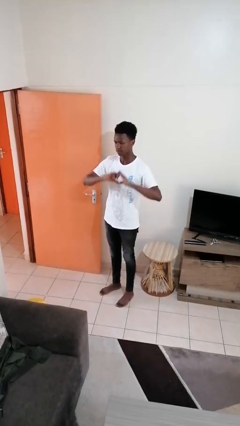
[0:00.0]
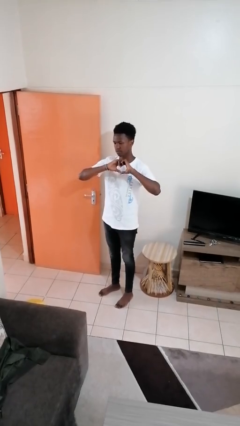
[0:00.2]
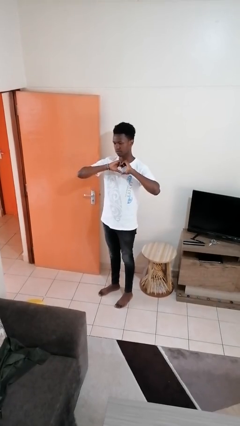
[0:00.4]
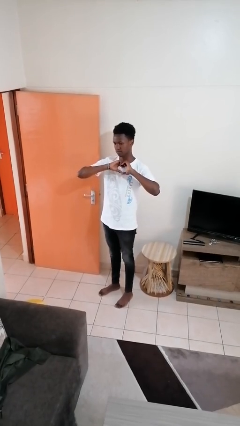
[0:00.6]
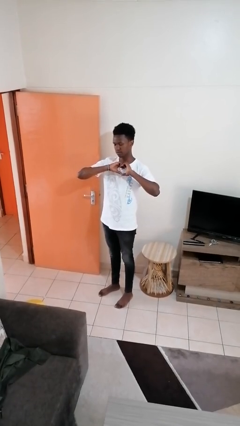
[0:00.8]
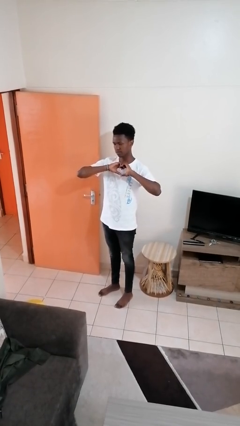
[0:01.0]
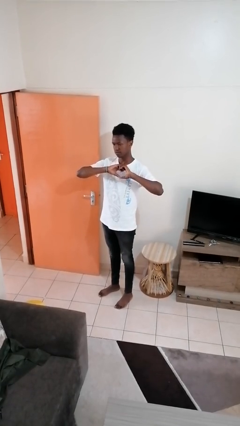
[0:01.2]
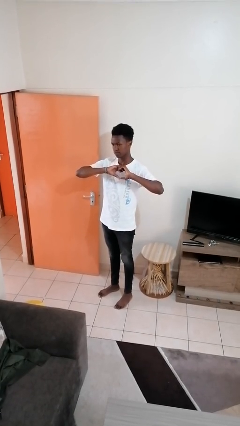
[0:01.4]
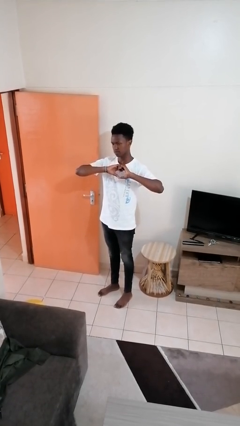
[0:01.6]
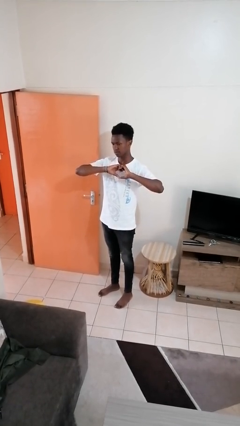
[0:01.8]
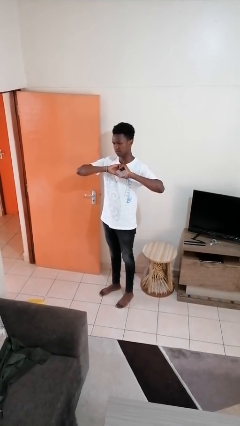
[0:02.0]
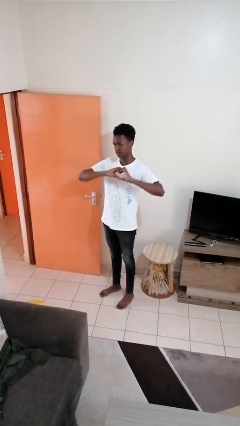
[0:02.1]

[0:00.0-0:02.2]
person gestures heart

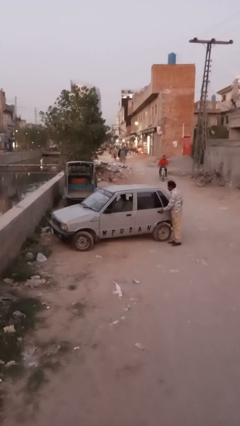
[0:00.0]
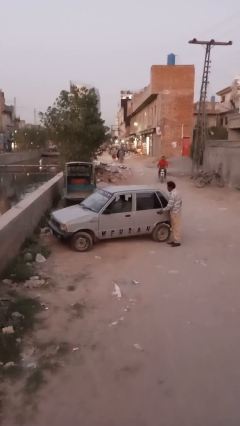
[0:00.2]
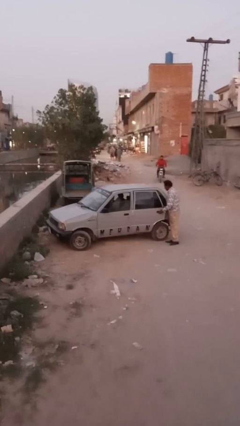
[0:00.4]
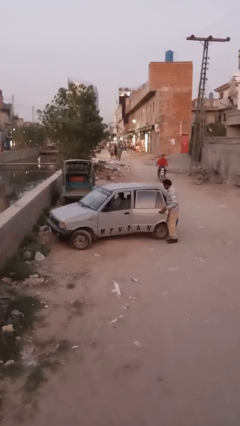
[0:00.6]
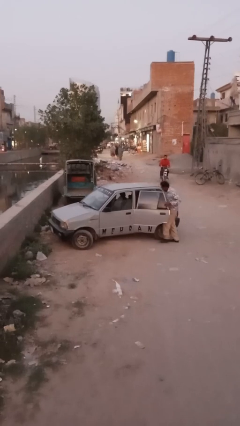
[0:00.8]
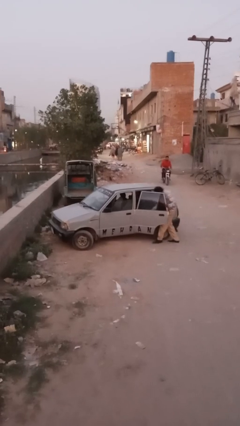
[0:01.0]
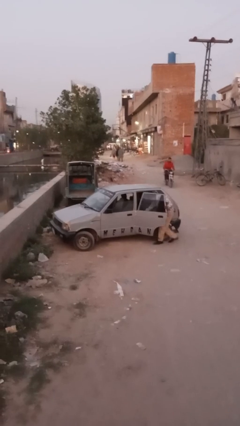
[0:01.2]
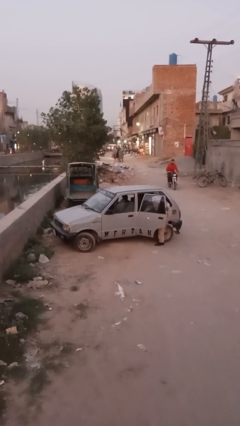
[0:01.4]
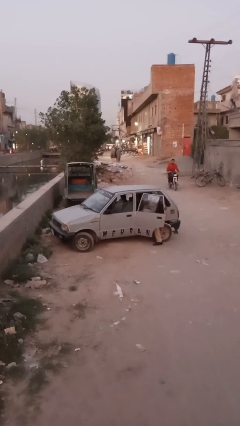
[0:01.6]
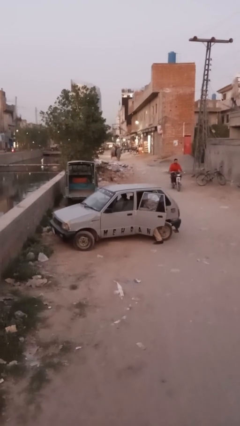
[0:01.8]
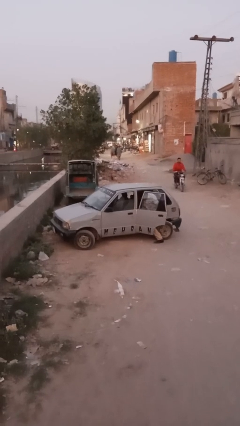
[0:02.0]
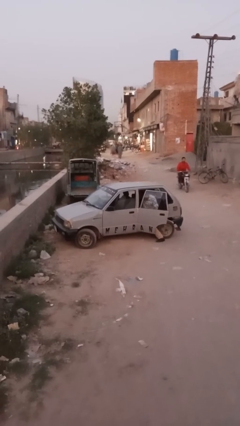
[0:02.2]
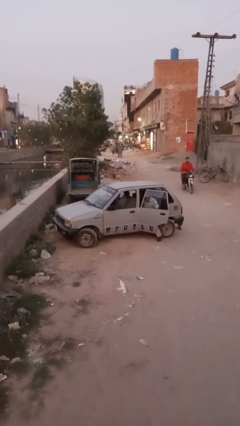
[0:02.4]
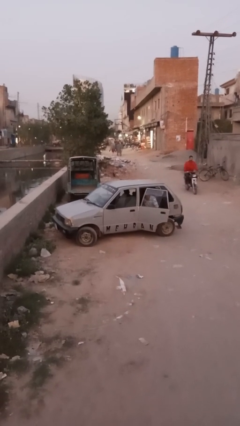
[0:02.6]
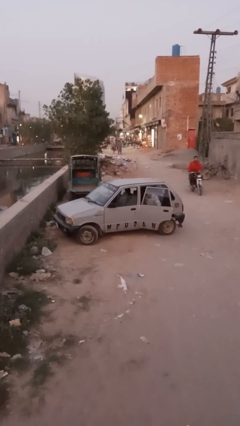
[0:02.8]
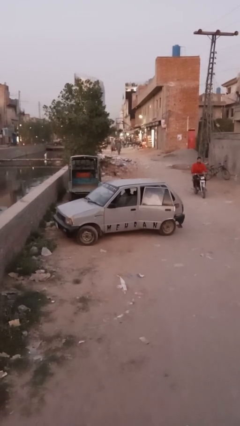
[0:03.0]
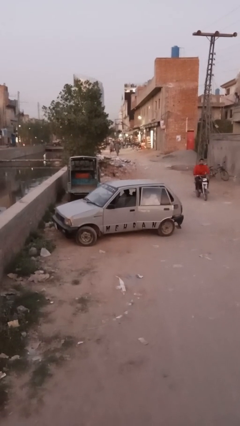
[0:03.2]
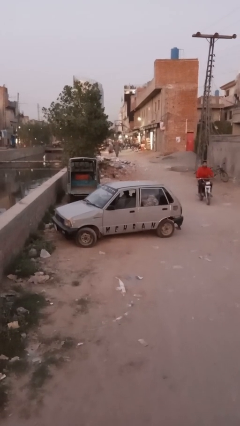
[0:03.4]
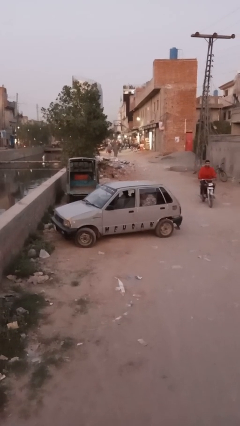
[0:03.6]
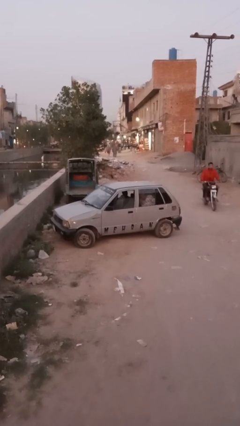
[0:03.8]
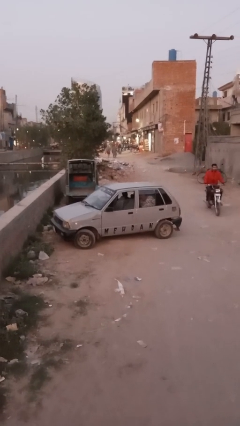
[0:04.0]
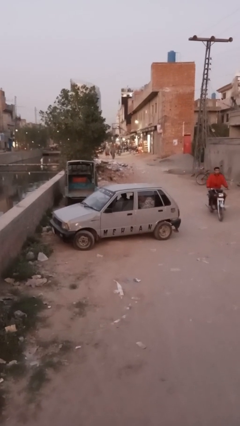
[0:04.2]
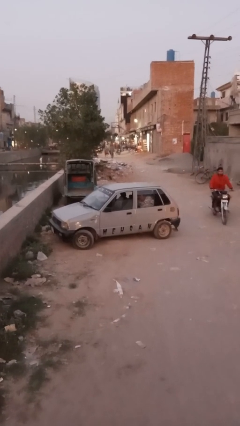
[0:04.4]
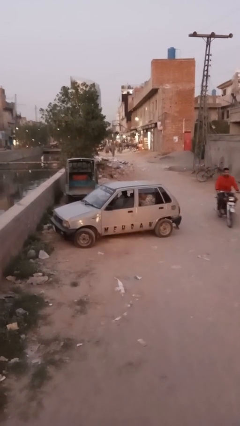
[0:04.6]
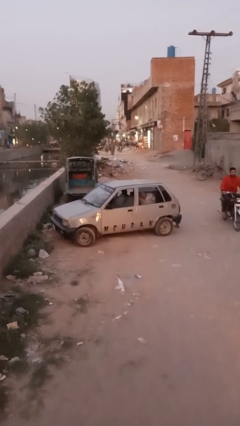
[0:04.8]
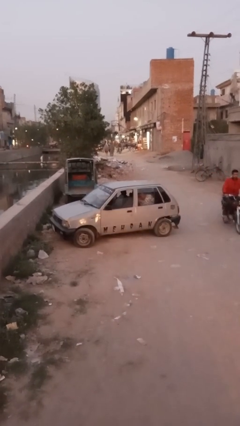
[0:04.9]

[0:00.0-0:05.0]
car picks up person

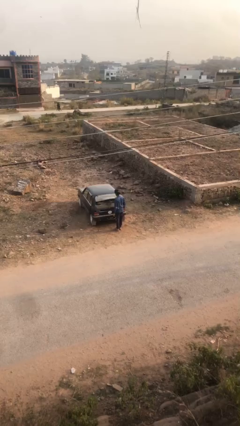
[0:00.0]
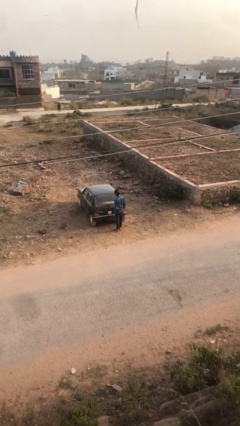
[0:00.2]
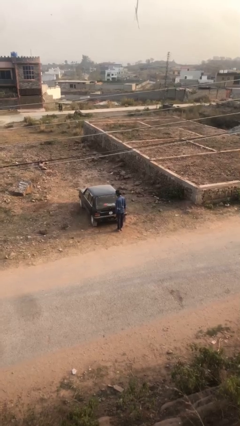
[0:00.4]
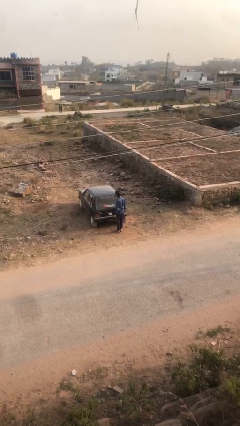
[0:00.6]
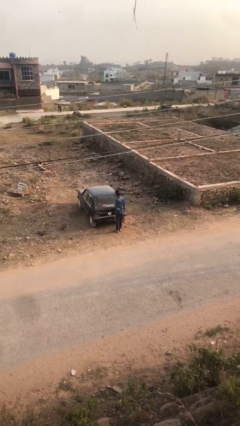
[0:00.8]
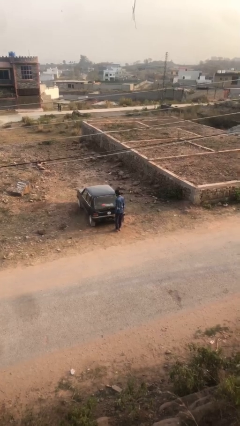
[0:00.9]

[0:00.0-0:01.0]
person closes car trunk

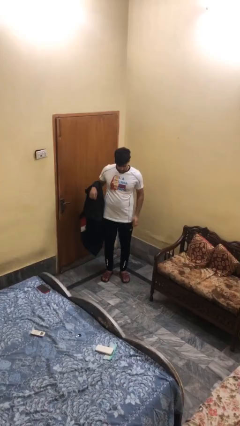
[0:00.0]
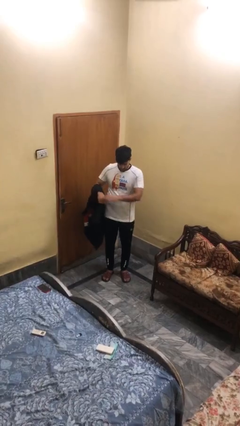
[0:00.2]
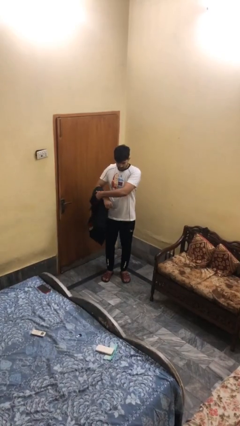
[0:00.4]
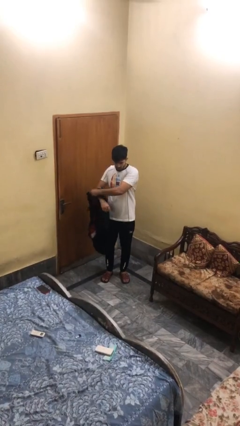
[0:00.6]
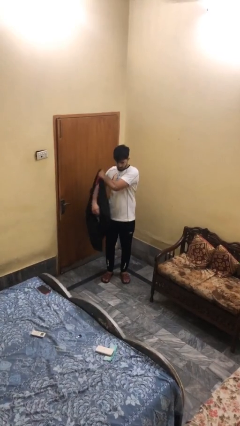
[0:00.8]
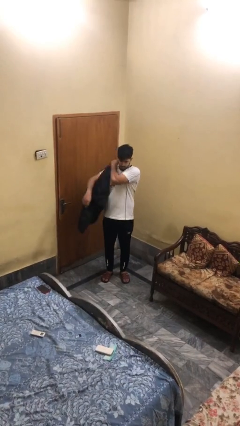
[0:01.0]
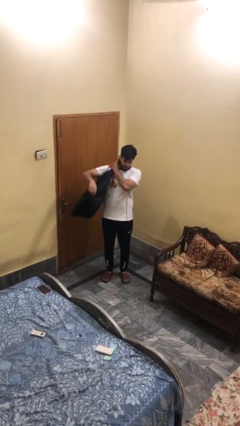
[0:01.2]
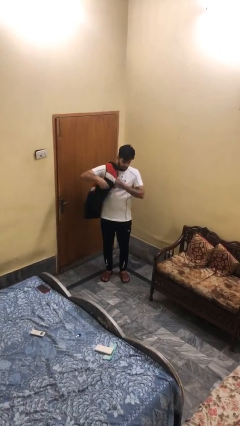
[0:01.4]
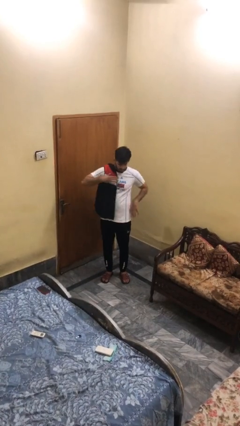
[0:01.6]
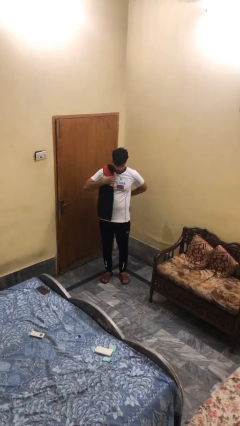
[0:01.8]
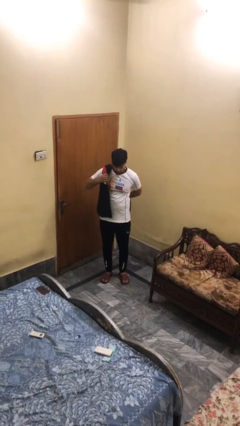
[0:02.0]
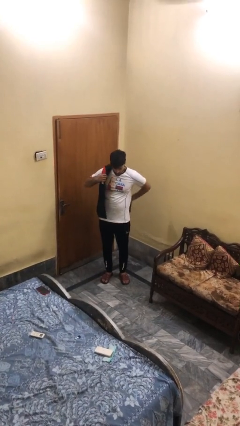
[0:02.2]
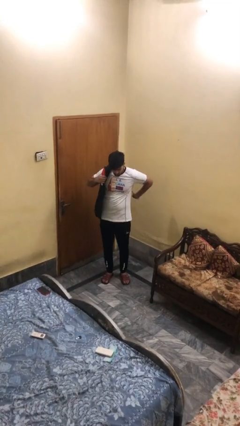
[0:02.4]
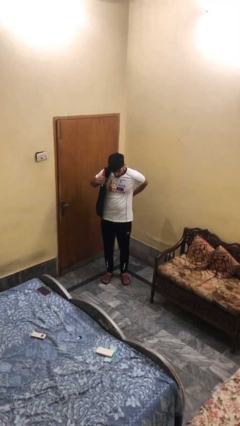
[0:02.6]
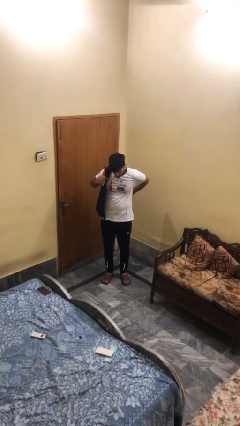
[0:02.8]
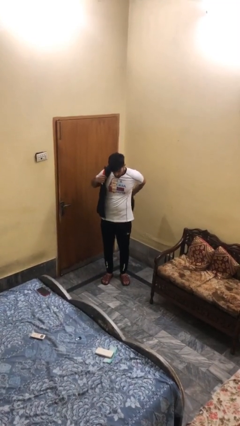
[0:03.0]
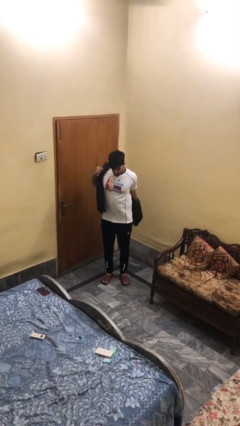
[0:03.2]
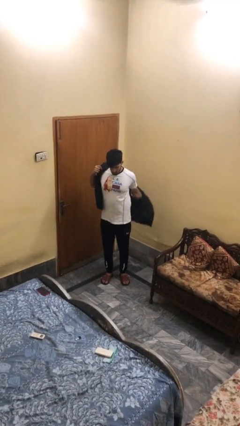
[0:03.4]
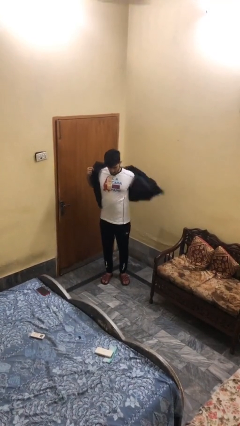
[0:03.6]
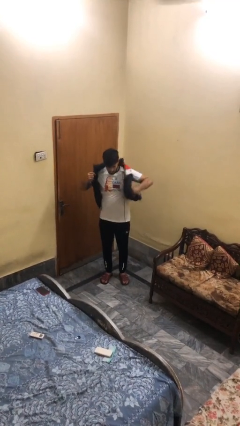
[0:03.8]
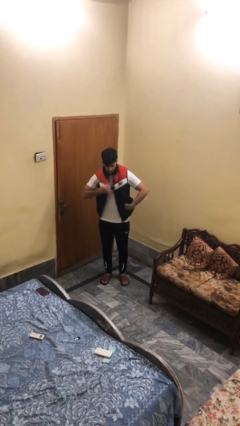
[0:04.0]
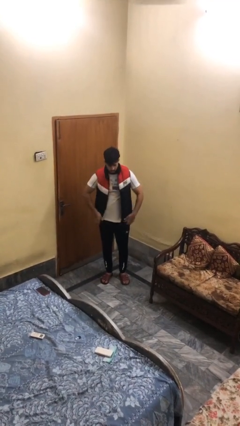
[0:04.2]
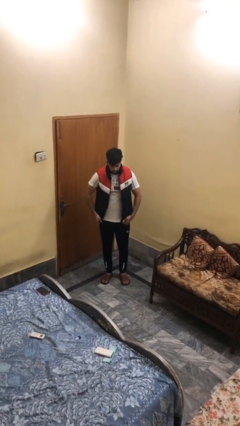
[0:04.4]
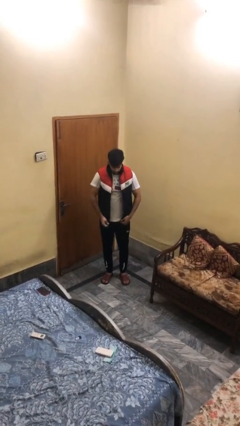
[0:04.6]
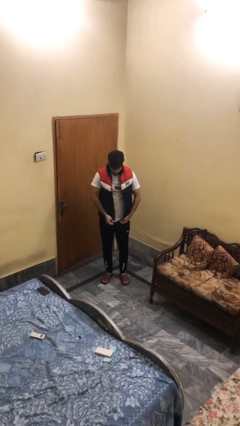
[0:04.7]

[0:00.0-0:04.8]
person puts on jacket

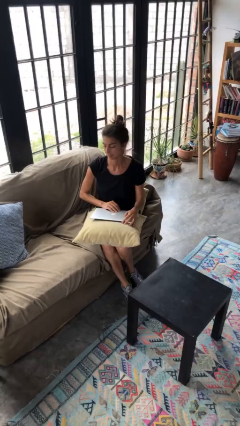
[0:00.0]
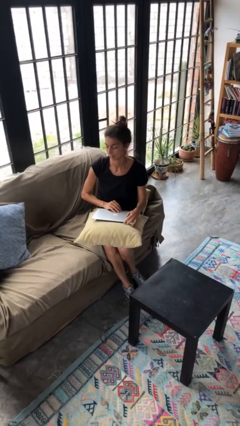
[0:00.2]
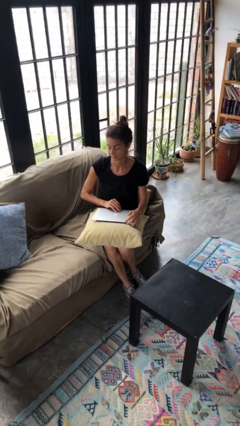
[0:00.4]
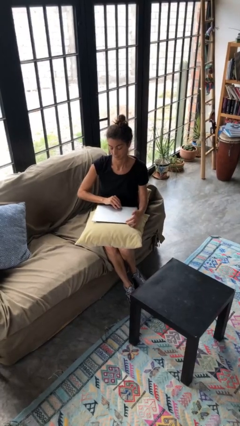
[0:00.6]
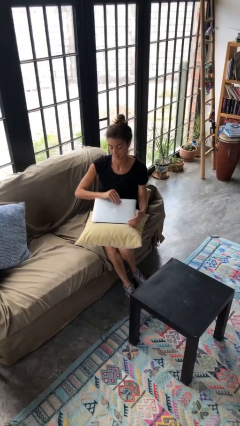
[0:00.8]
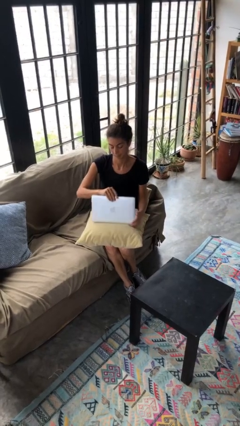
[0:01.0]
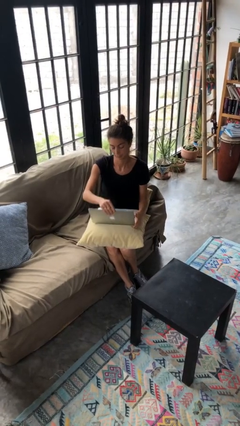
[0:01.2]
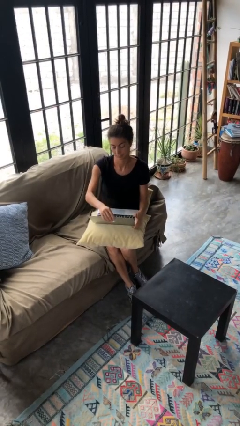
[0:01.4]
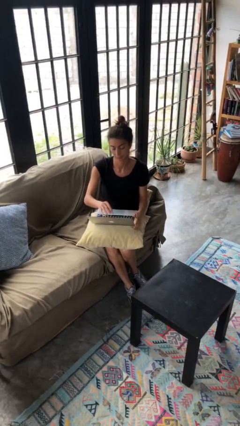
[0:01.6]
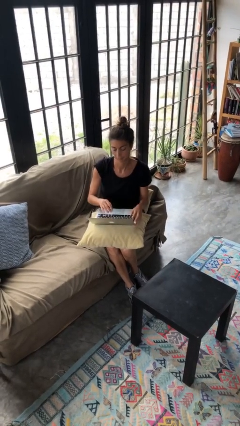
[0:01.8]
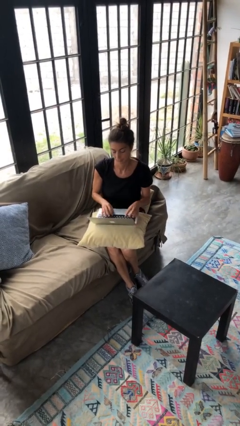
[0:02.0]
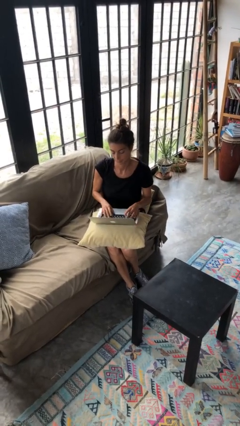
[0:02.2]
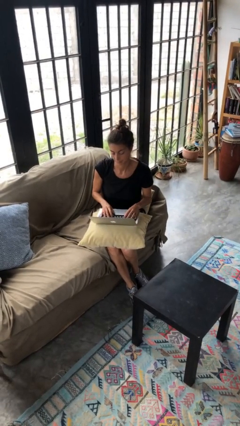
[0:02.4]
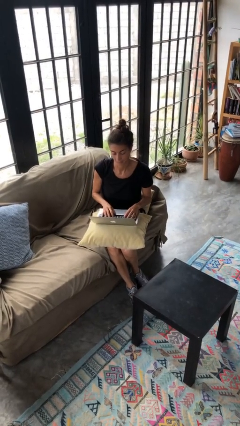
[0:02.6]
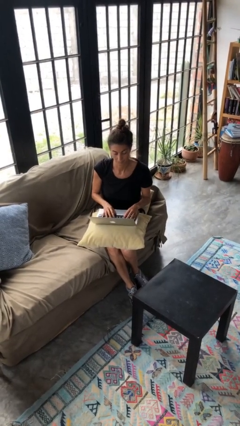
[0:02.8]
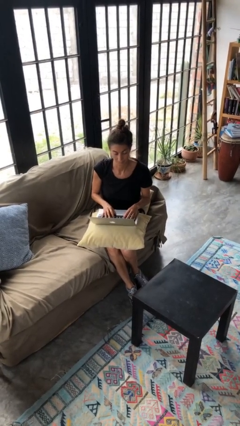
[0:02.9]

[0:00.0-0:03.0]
person opens laptop

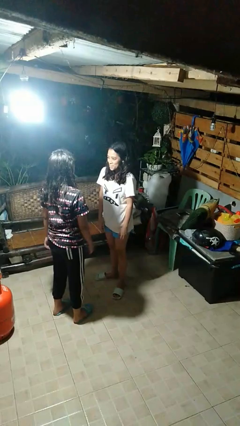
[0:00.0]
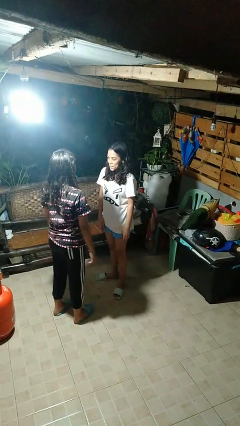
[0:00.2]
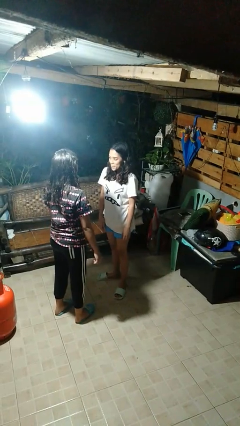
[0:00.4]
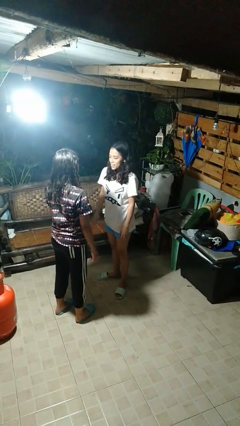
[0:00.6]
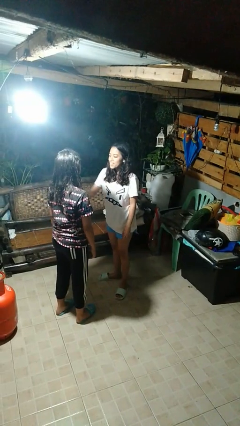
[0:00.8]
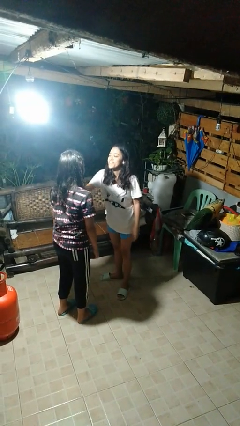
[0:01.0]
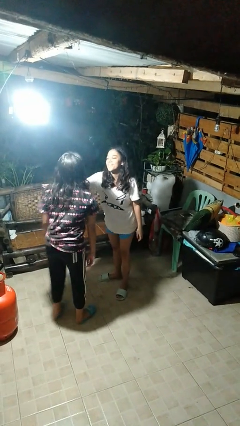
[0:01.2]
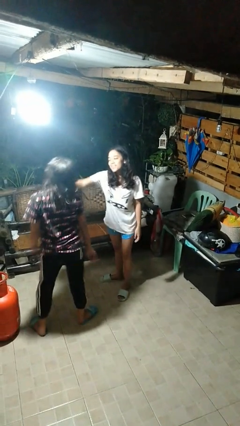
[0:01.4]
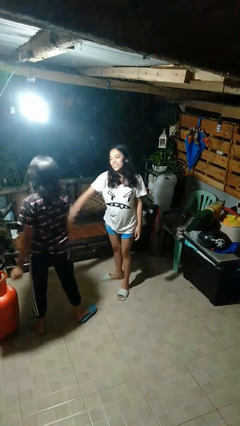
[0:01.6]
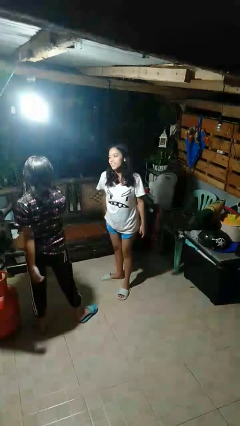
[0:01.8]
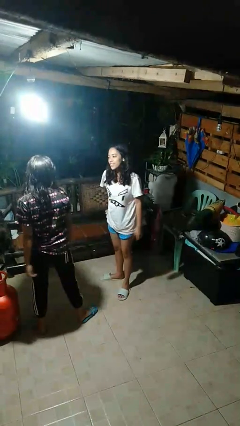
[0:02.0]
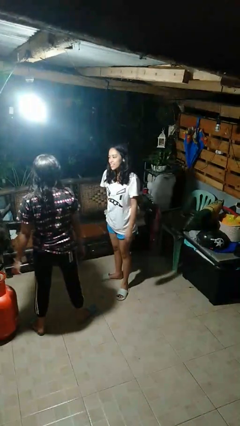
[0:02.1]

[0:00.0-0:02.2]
person shoves person
